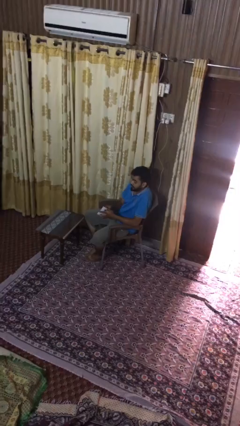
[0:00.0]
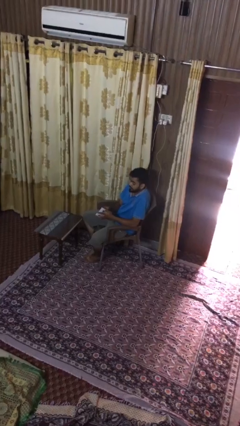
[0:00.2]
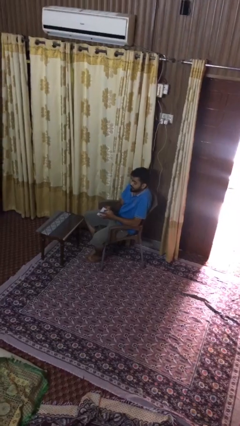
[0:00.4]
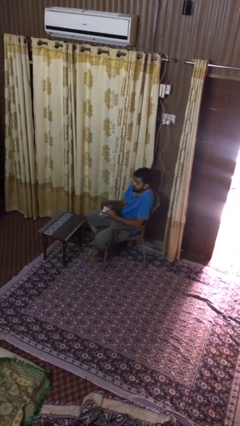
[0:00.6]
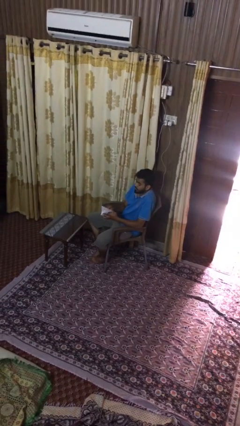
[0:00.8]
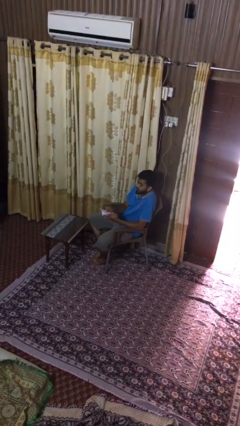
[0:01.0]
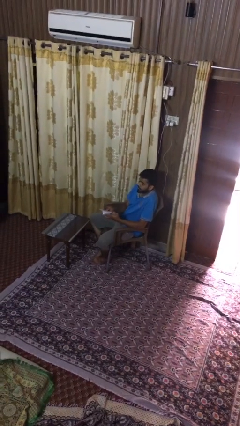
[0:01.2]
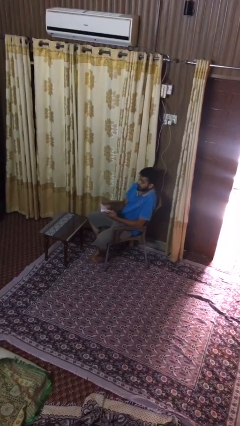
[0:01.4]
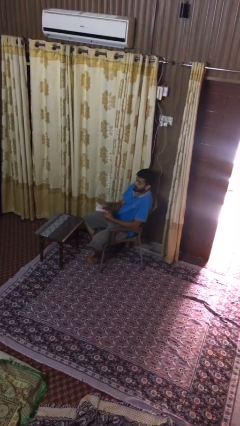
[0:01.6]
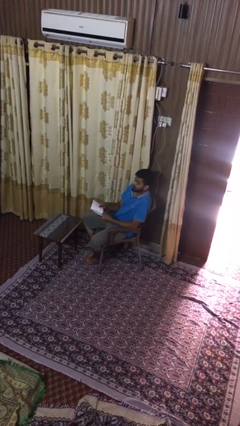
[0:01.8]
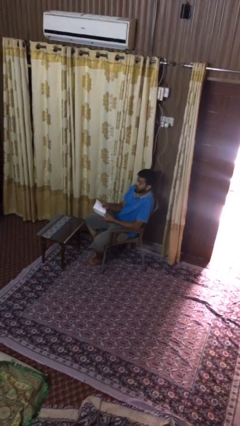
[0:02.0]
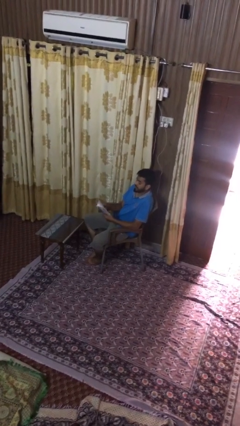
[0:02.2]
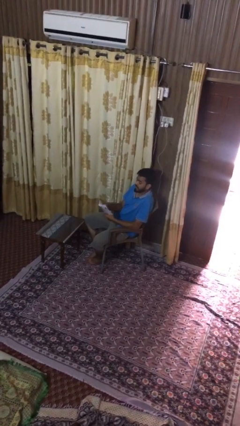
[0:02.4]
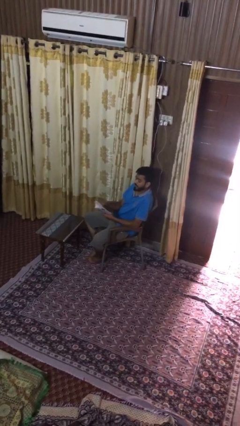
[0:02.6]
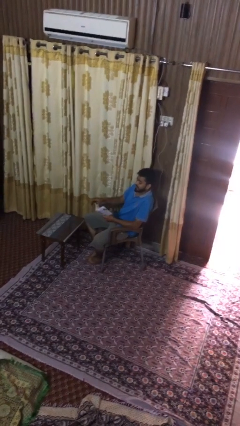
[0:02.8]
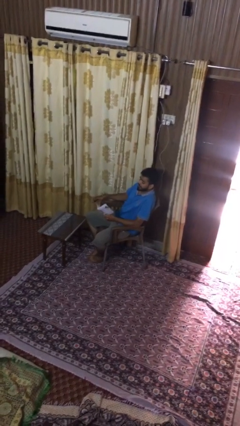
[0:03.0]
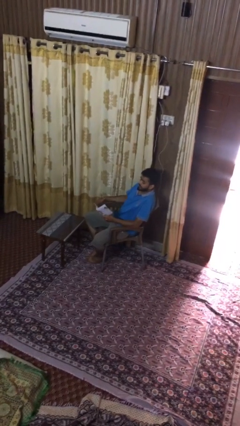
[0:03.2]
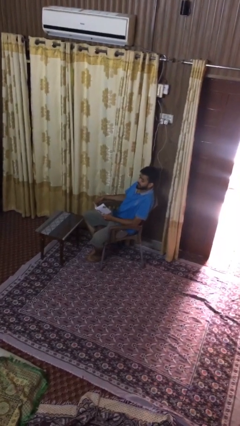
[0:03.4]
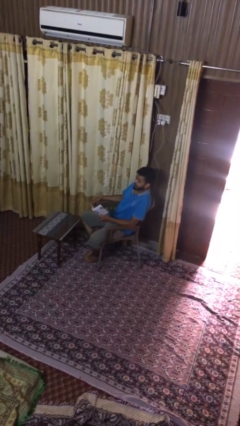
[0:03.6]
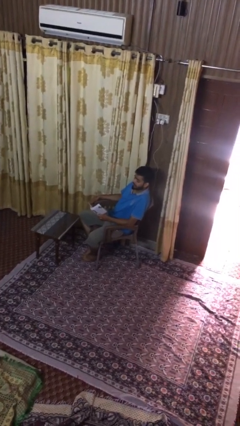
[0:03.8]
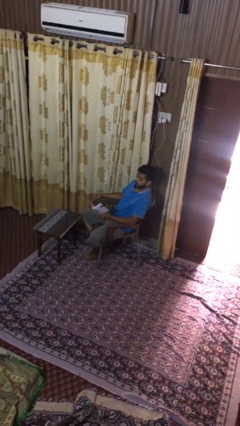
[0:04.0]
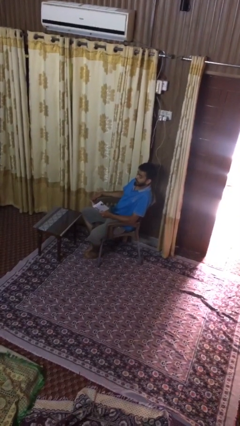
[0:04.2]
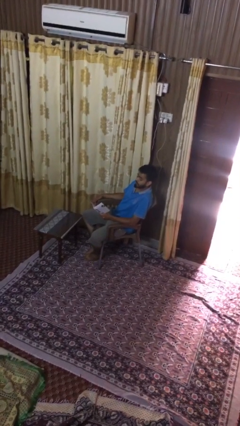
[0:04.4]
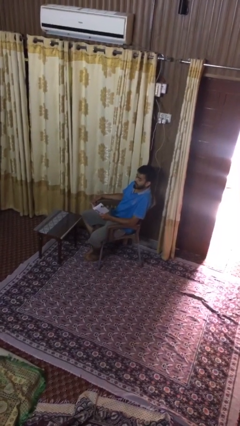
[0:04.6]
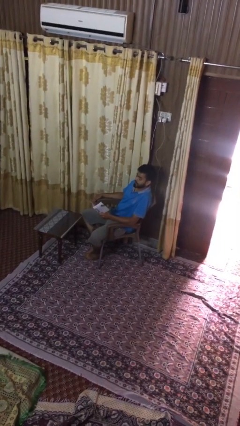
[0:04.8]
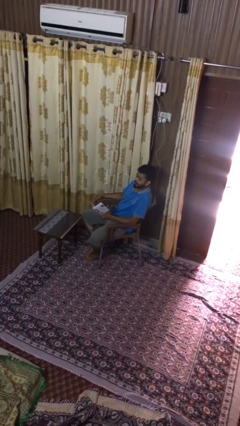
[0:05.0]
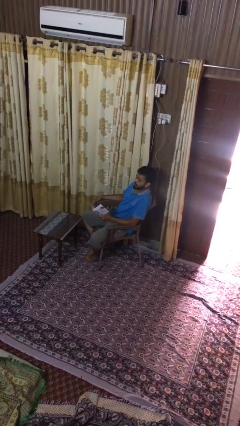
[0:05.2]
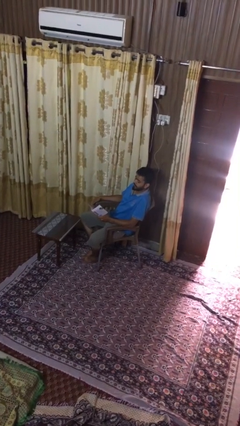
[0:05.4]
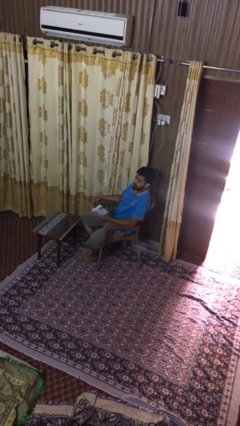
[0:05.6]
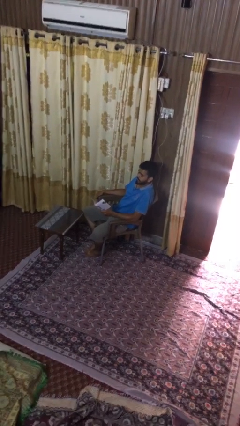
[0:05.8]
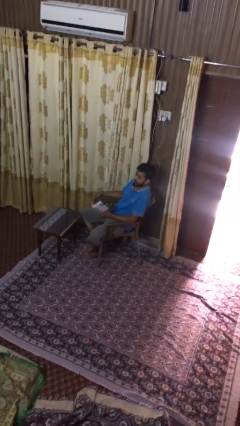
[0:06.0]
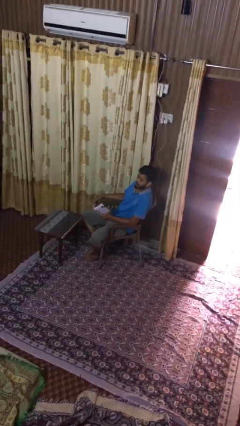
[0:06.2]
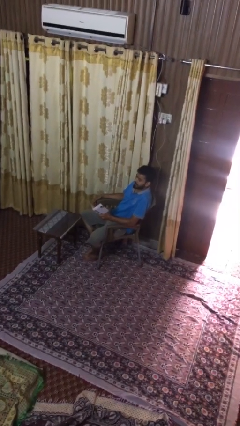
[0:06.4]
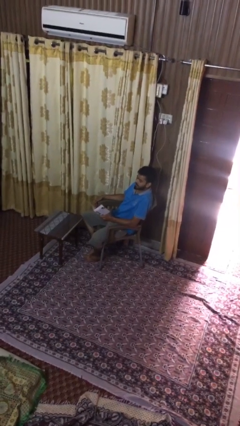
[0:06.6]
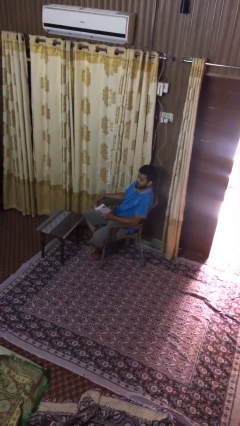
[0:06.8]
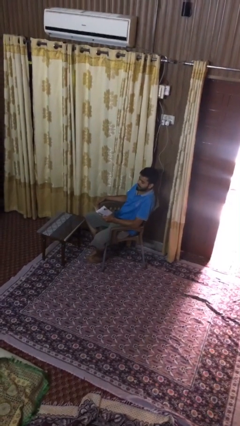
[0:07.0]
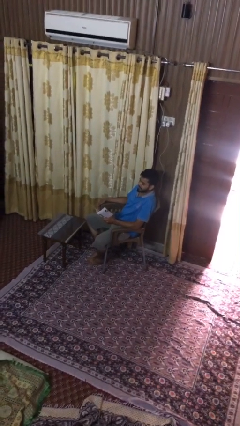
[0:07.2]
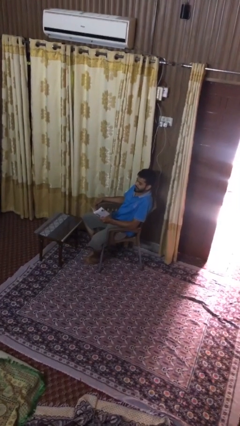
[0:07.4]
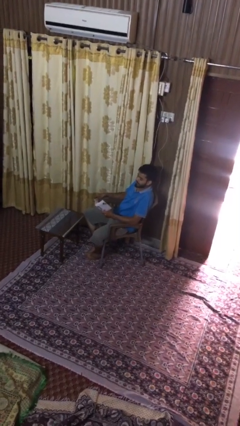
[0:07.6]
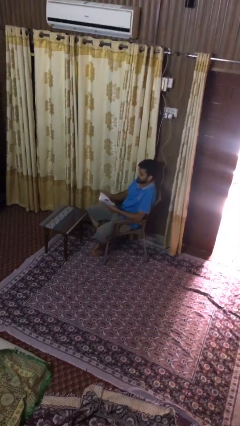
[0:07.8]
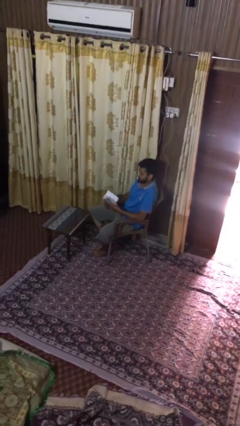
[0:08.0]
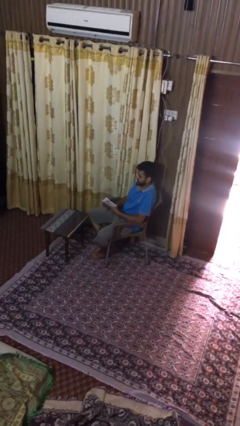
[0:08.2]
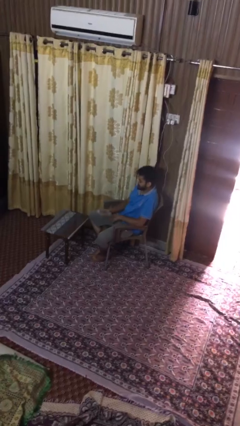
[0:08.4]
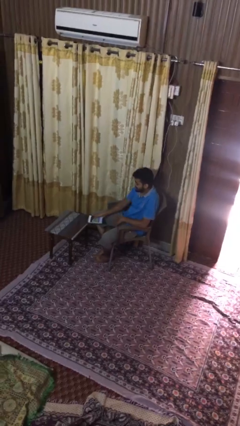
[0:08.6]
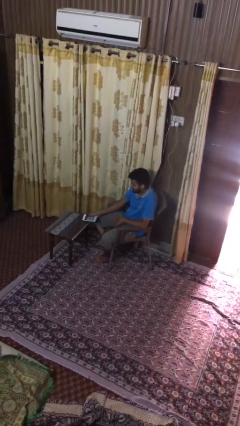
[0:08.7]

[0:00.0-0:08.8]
person reads document

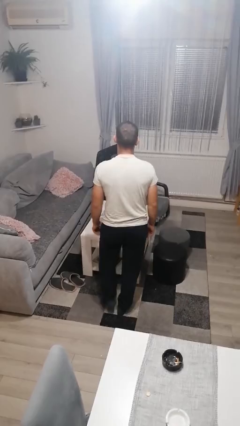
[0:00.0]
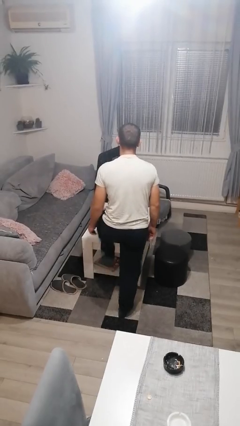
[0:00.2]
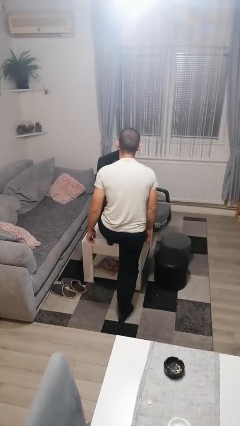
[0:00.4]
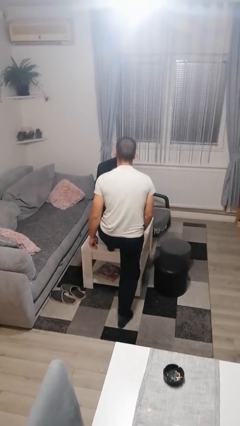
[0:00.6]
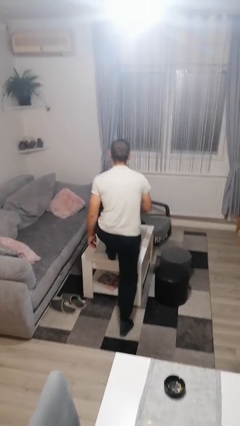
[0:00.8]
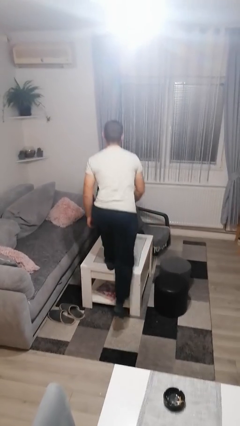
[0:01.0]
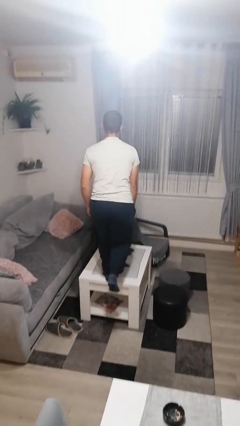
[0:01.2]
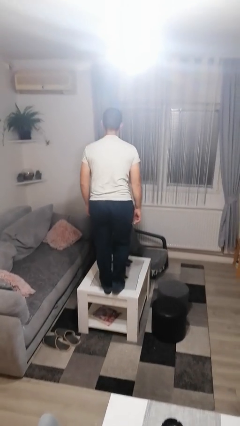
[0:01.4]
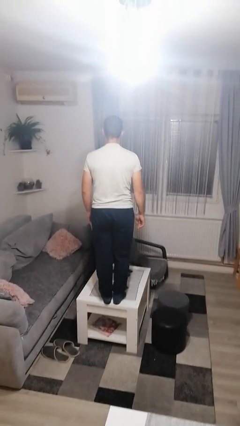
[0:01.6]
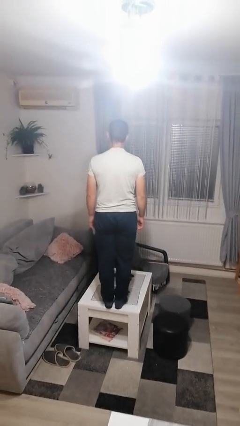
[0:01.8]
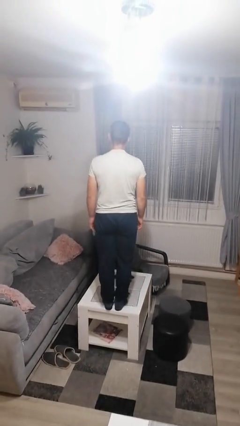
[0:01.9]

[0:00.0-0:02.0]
person climbs on table

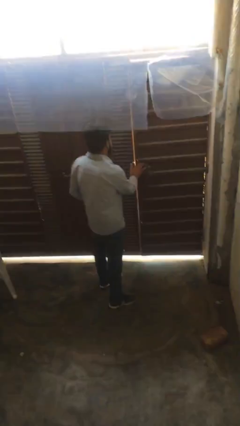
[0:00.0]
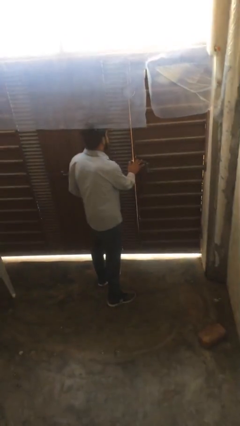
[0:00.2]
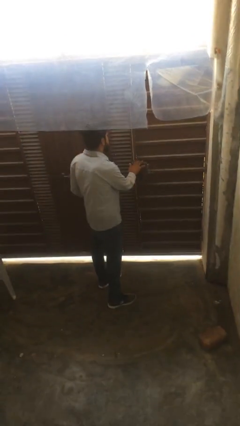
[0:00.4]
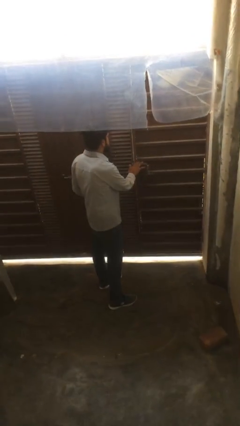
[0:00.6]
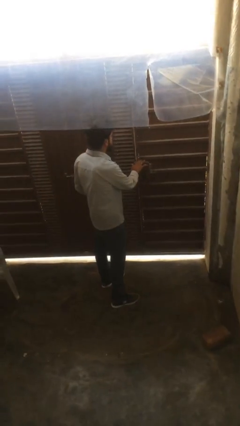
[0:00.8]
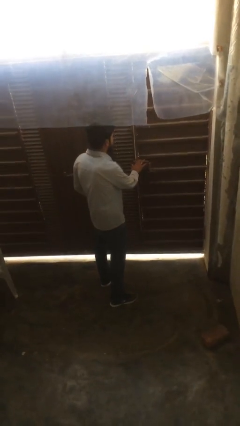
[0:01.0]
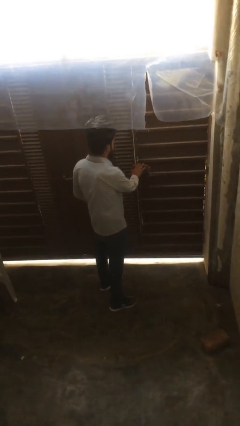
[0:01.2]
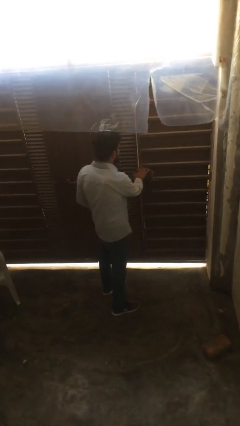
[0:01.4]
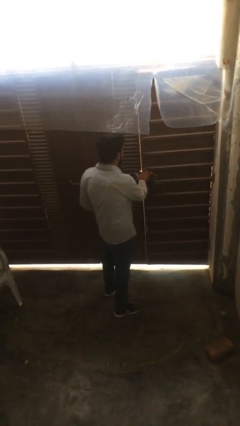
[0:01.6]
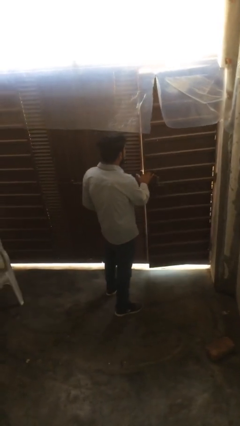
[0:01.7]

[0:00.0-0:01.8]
person closes facility door

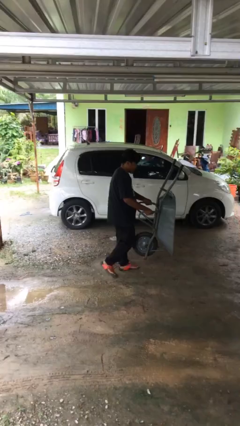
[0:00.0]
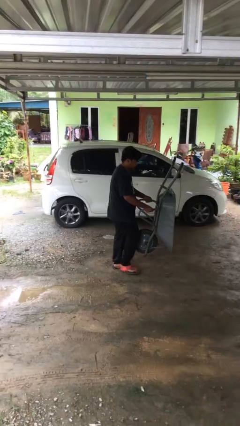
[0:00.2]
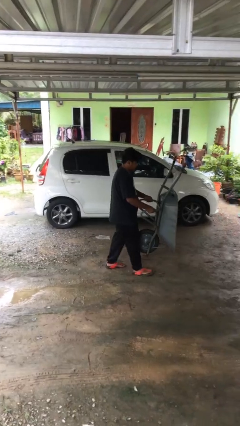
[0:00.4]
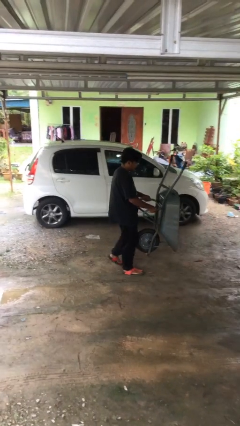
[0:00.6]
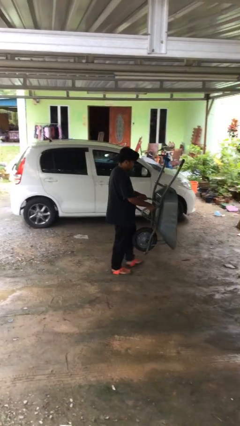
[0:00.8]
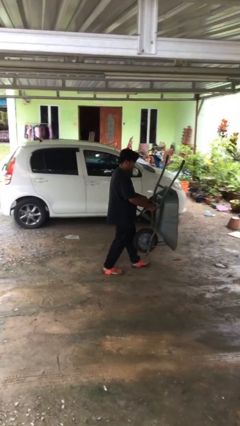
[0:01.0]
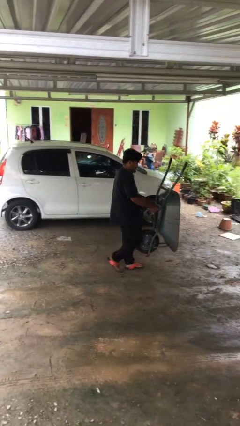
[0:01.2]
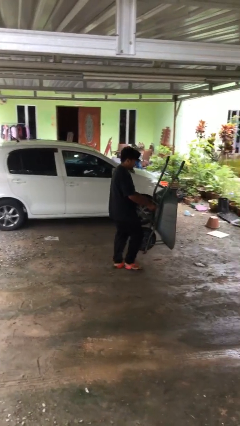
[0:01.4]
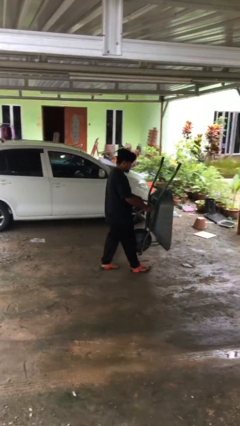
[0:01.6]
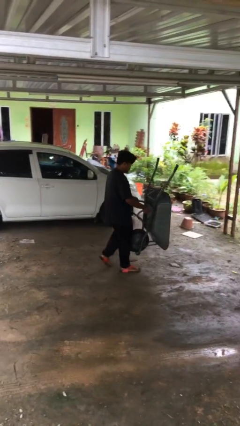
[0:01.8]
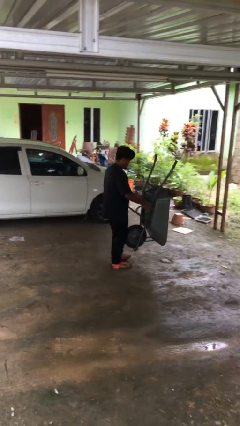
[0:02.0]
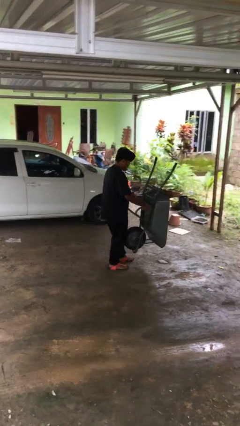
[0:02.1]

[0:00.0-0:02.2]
person carries heavy object

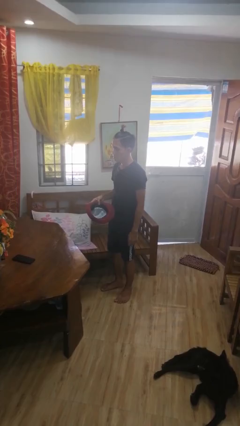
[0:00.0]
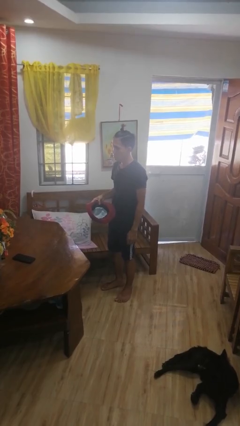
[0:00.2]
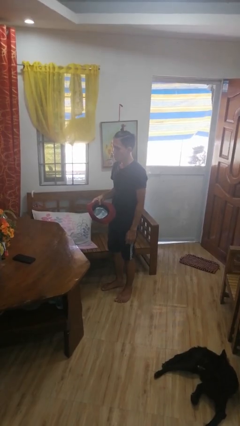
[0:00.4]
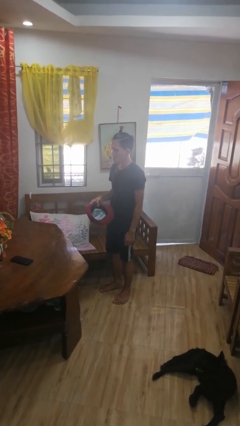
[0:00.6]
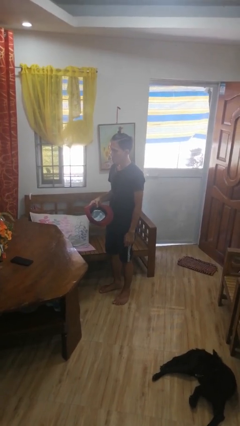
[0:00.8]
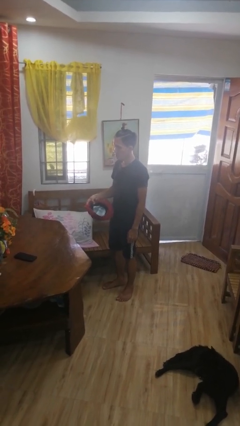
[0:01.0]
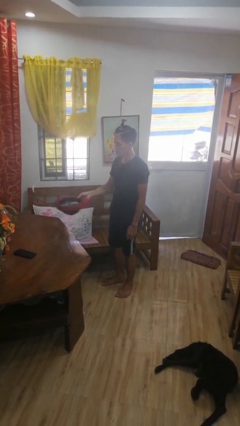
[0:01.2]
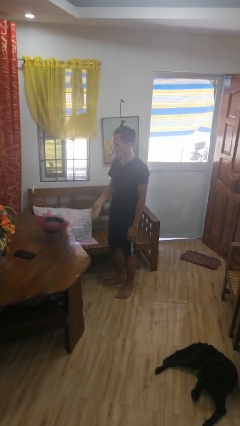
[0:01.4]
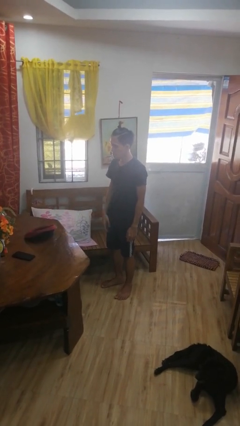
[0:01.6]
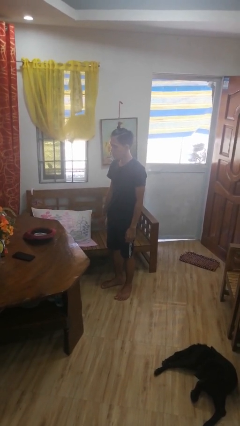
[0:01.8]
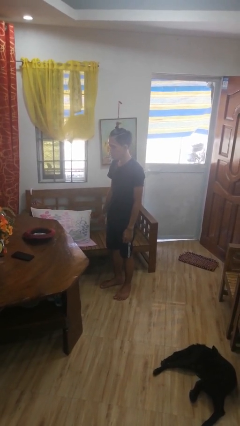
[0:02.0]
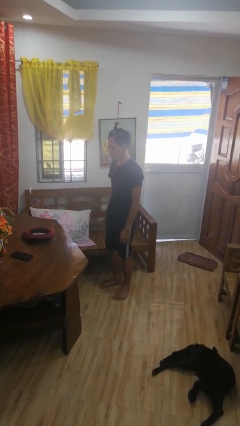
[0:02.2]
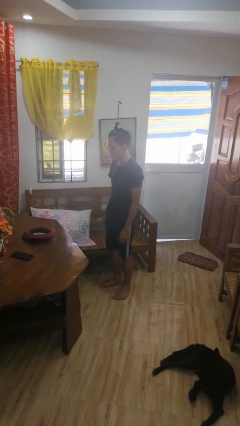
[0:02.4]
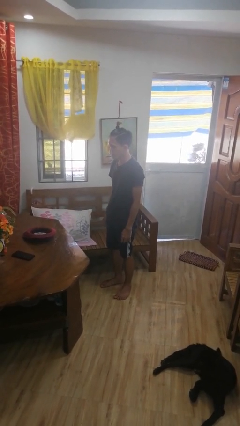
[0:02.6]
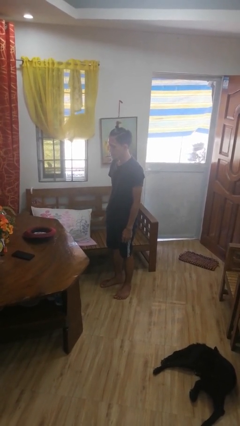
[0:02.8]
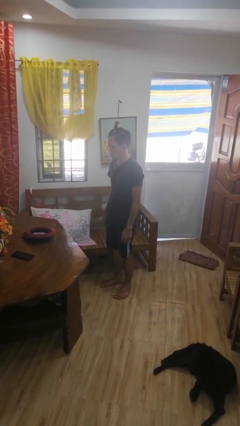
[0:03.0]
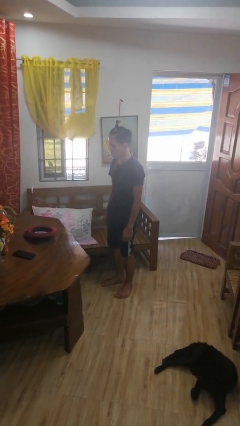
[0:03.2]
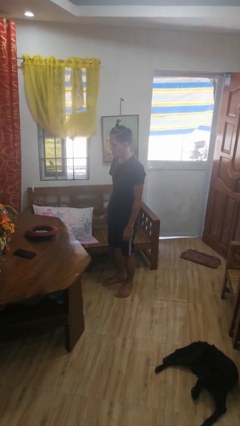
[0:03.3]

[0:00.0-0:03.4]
person throws object on table
